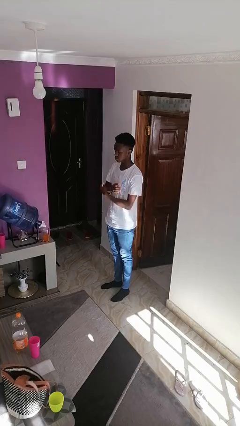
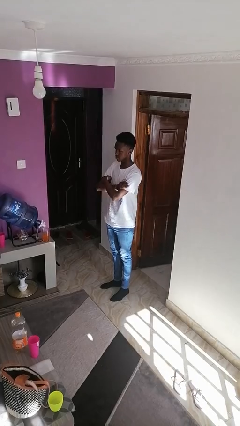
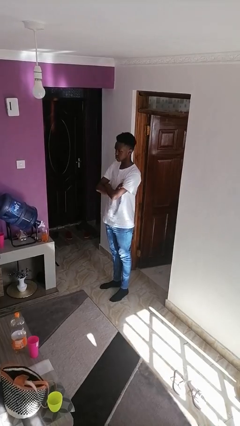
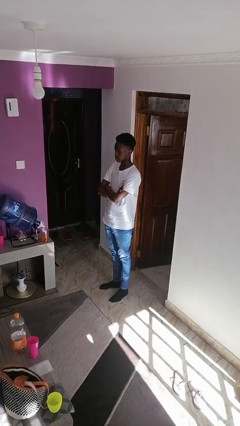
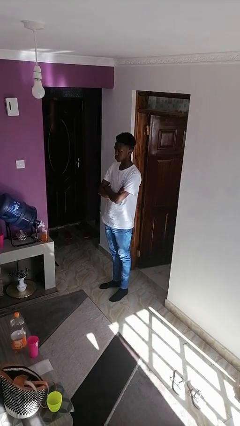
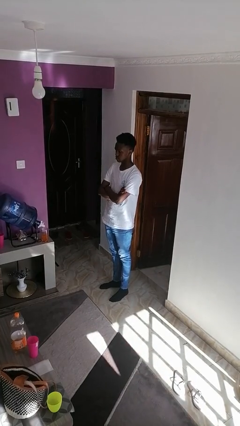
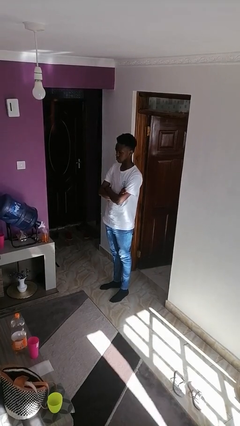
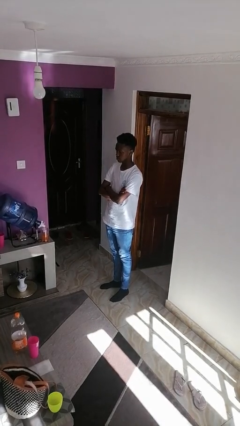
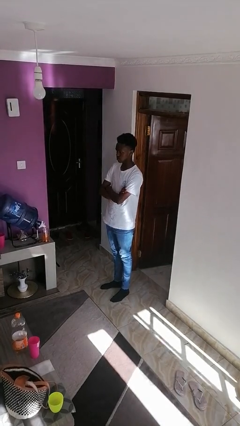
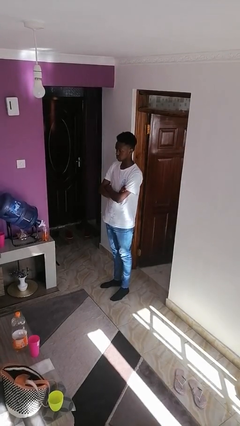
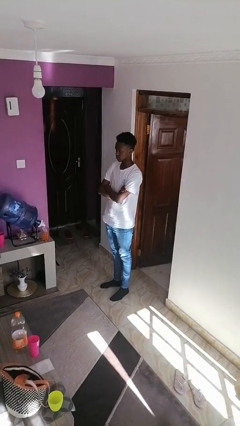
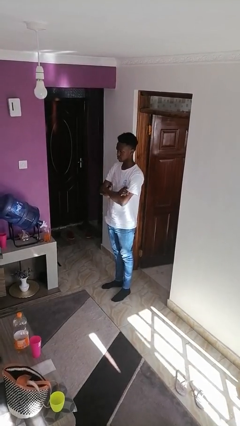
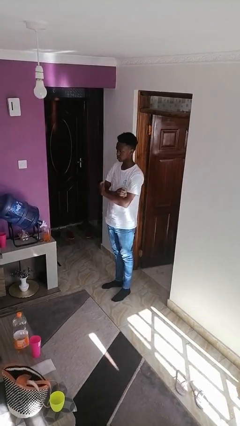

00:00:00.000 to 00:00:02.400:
person crosses arms

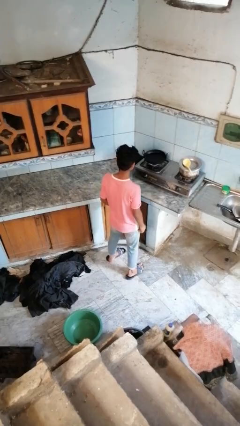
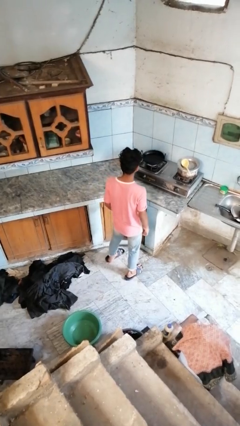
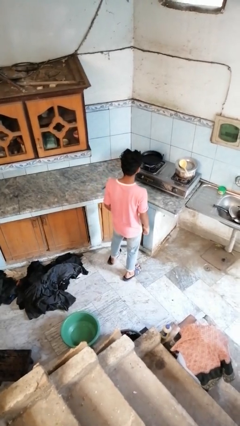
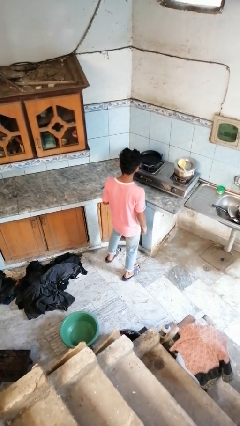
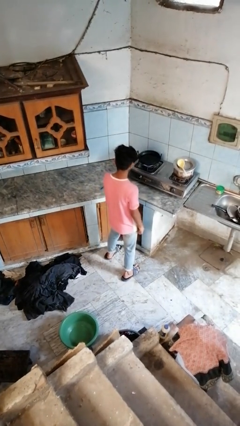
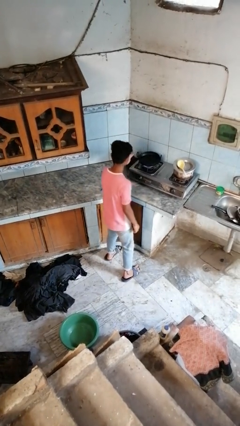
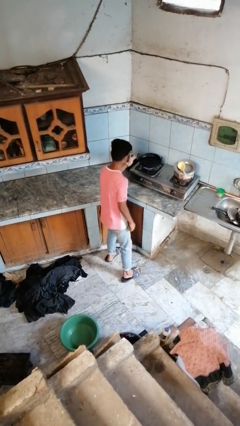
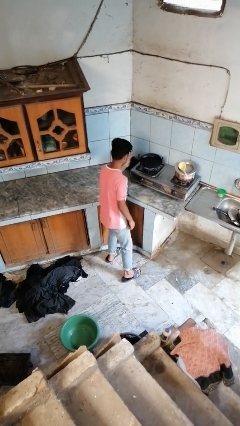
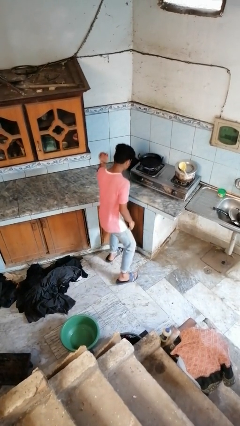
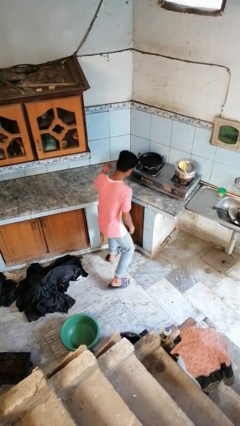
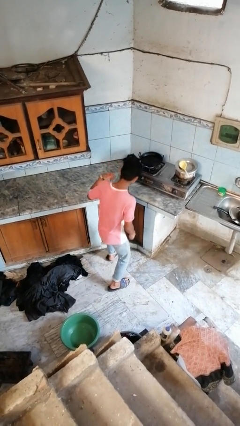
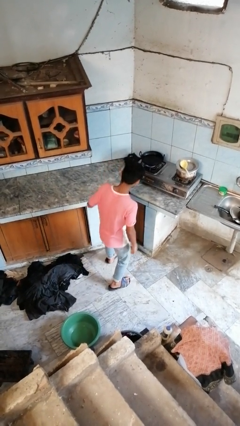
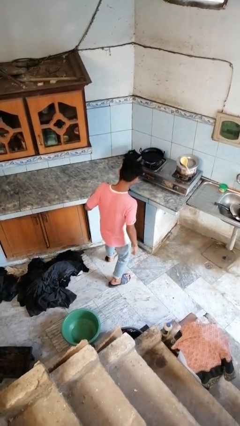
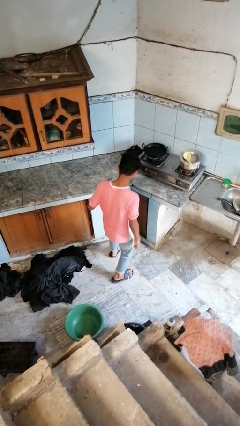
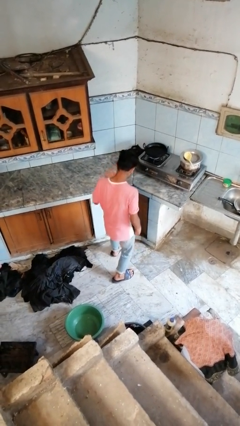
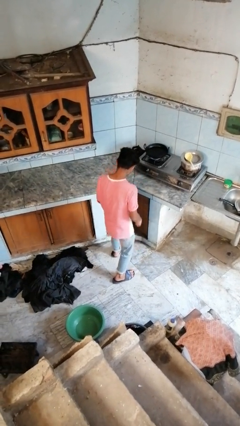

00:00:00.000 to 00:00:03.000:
person burns hand

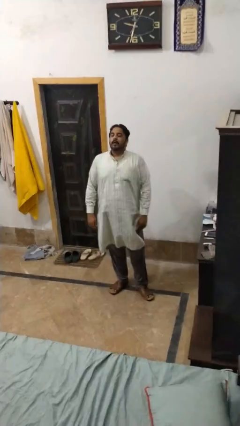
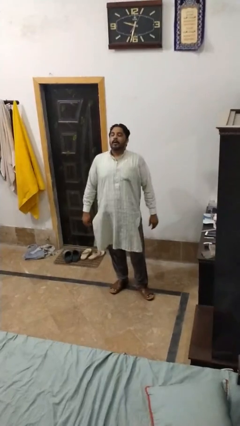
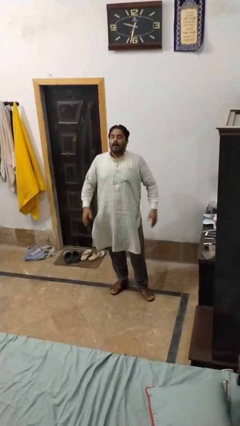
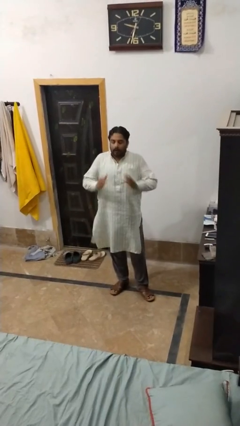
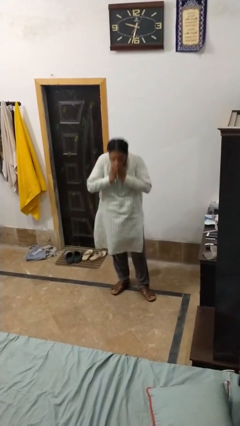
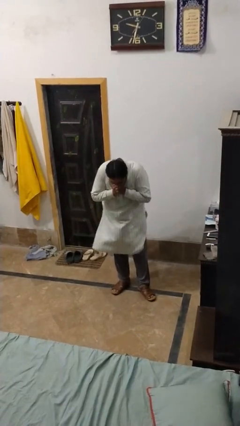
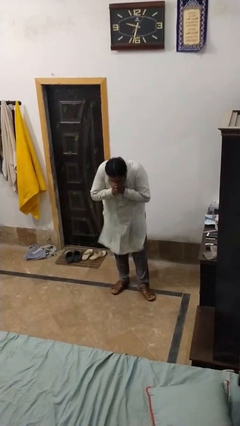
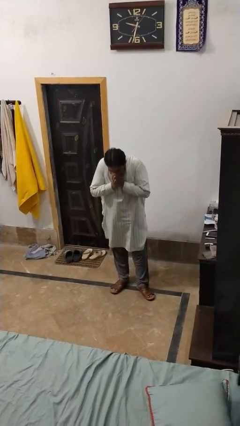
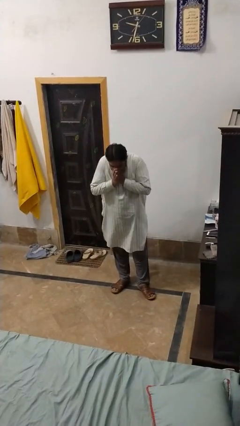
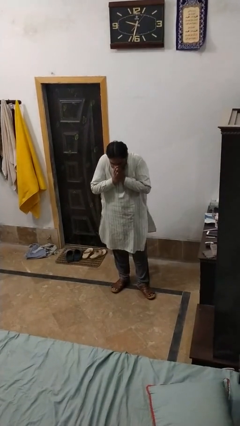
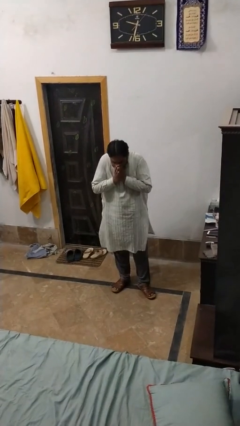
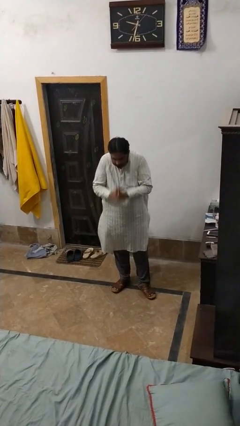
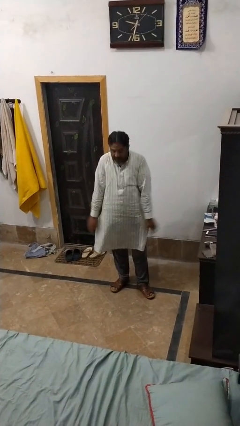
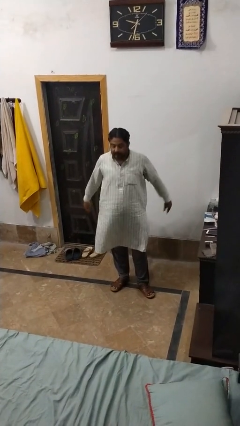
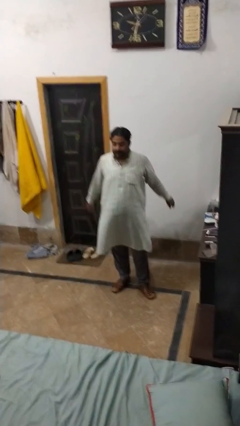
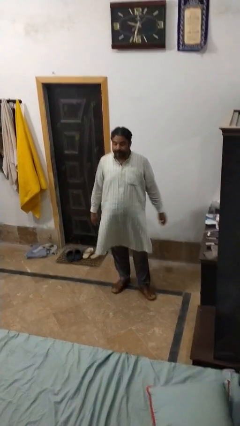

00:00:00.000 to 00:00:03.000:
person sneezes into hand

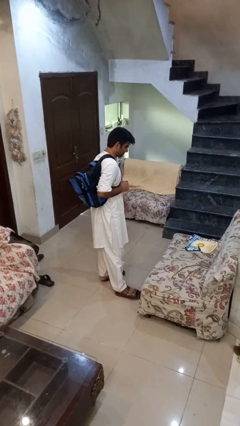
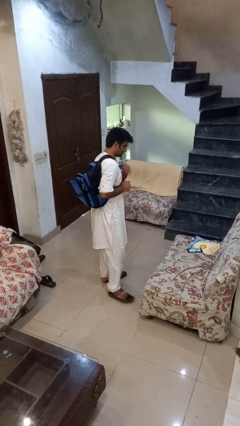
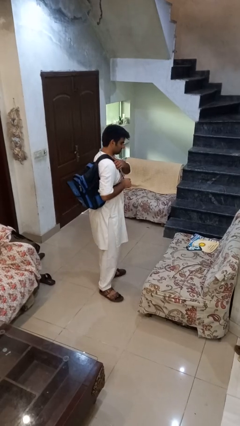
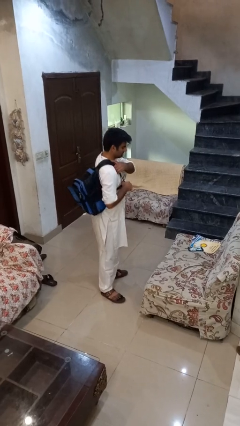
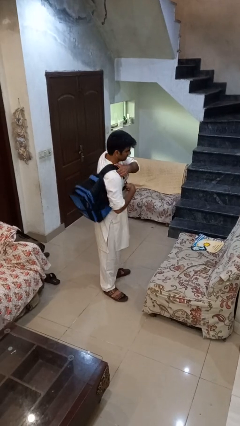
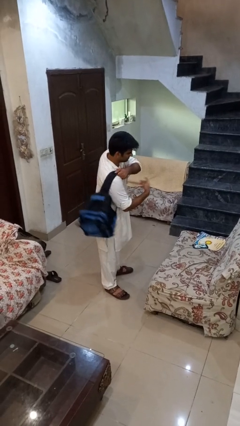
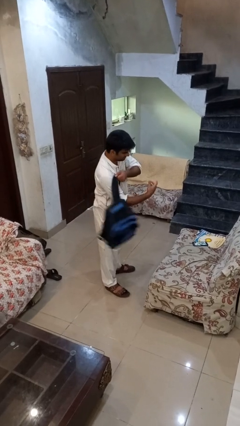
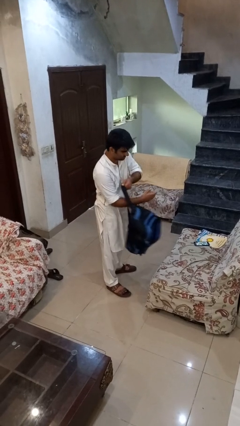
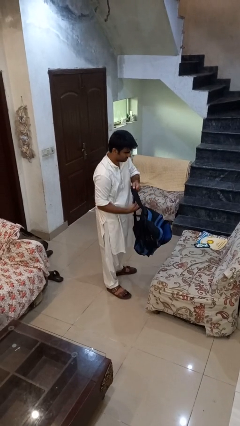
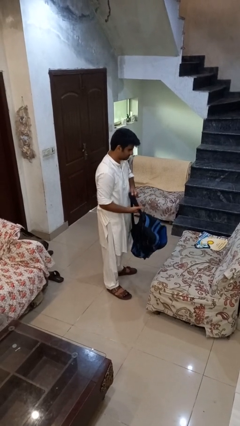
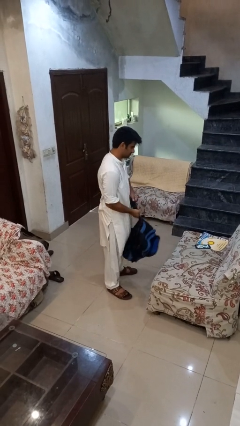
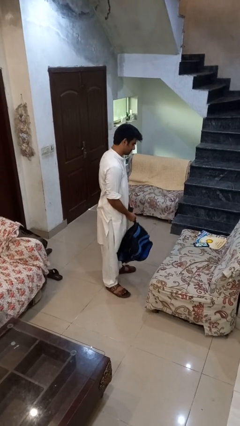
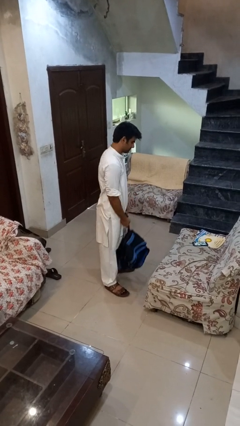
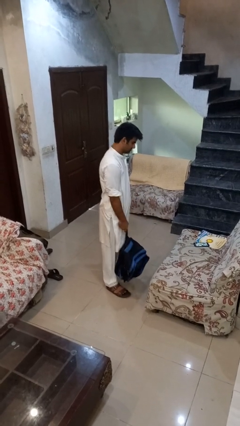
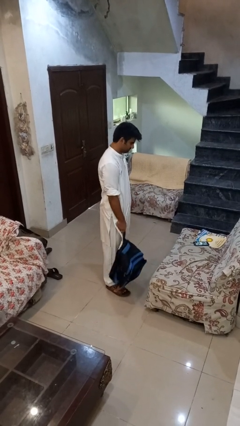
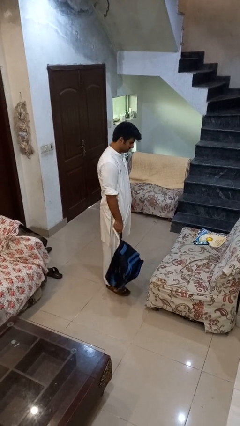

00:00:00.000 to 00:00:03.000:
person takes off backpack

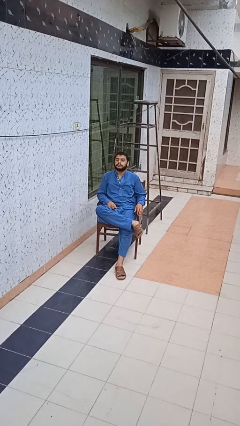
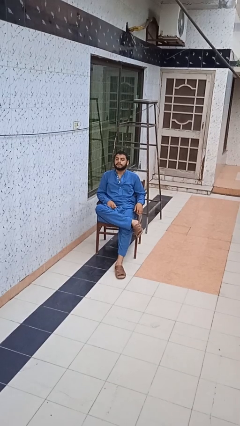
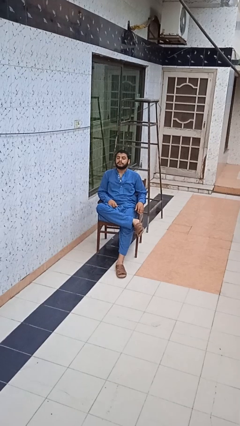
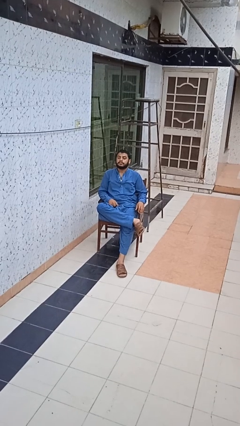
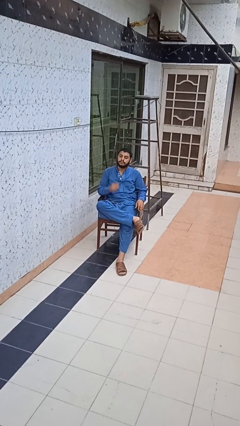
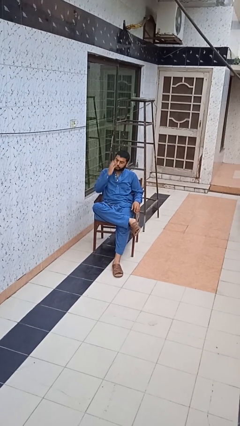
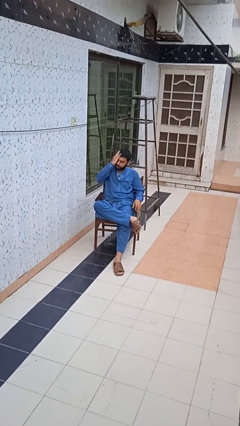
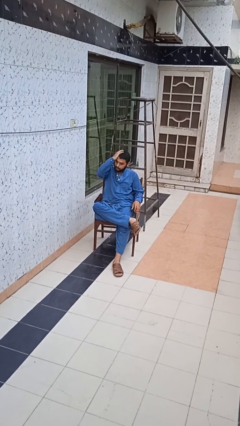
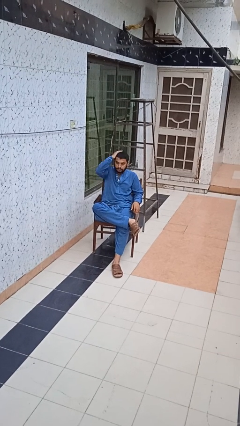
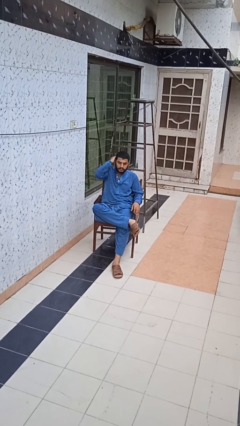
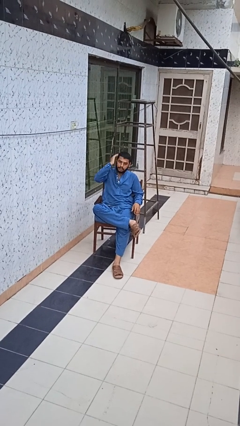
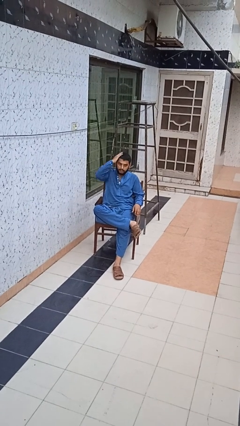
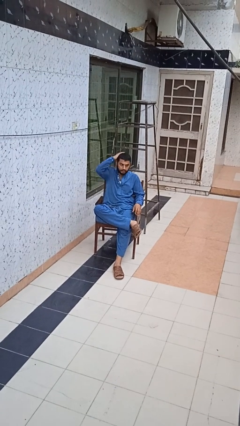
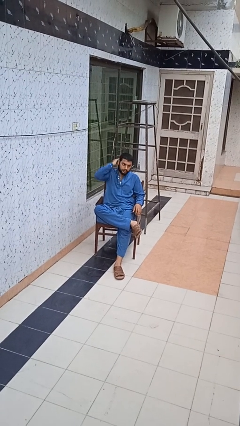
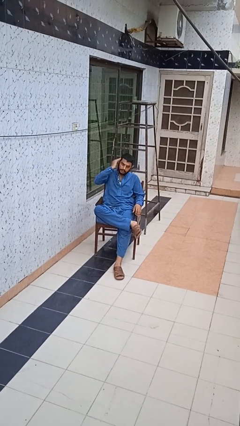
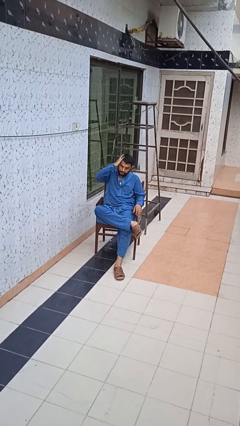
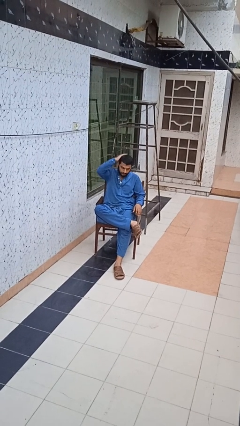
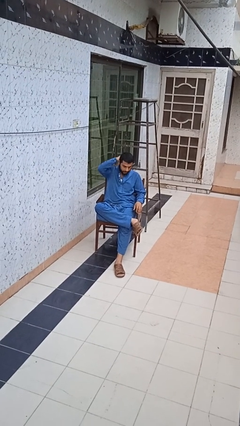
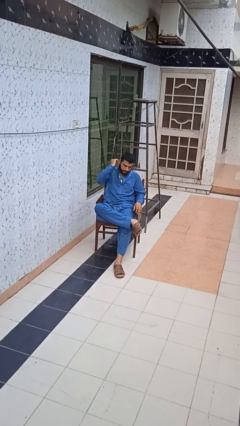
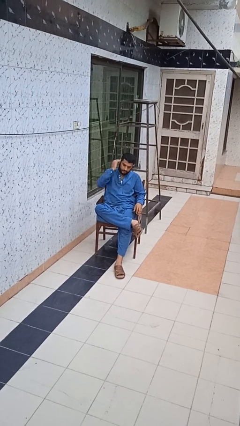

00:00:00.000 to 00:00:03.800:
person strokes hair

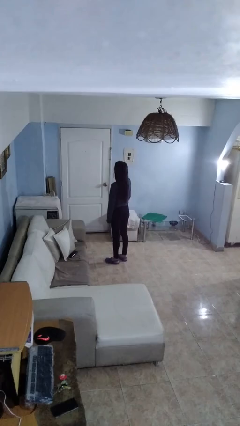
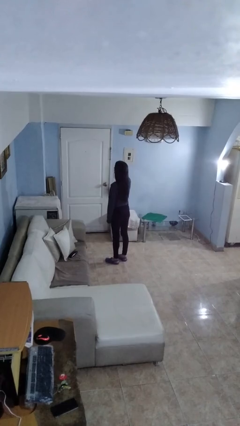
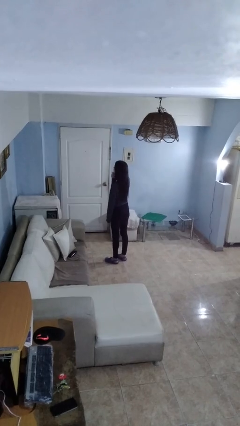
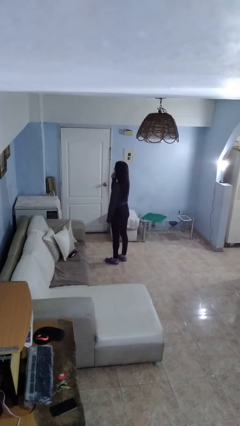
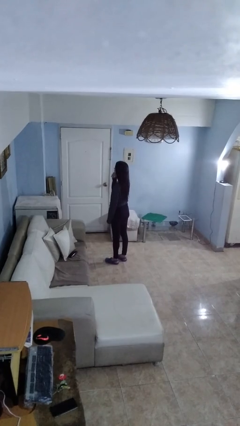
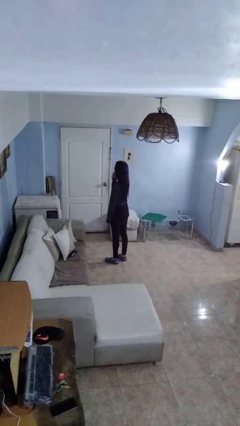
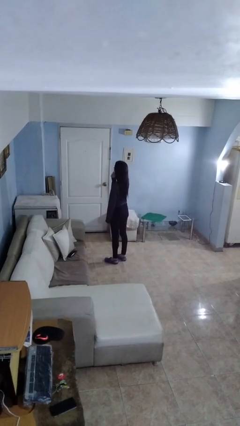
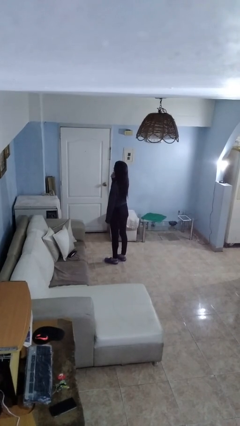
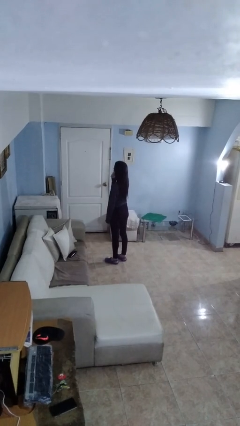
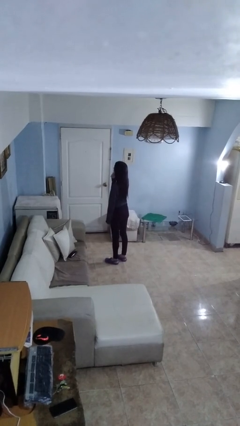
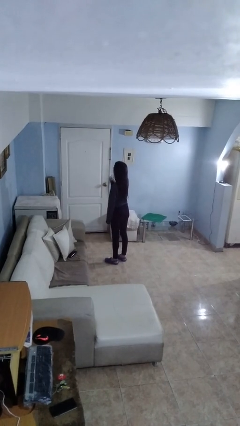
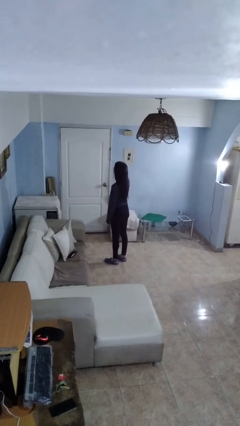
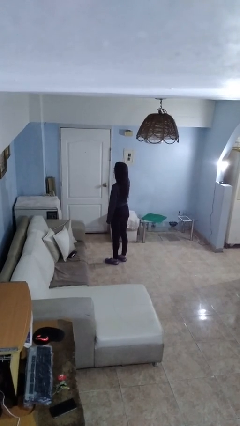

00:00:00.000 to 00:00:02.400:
person strokes chin
